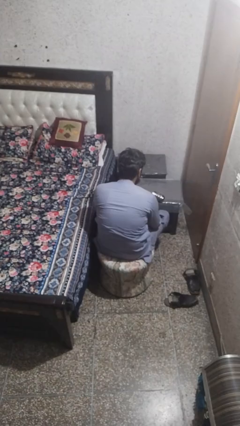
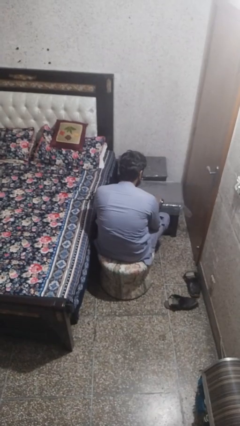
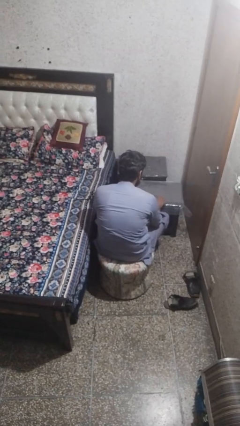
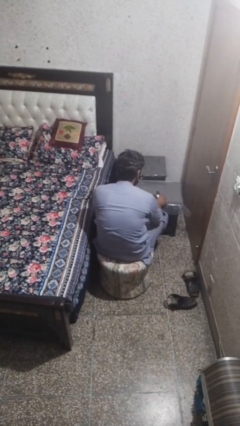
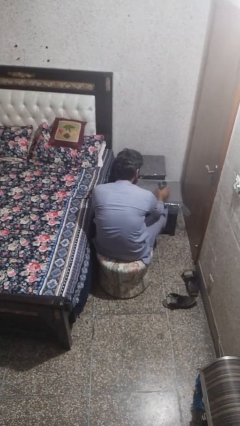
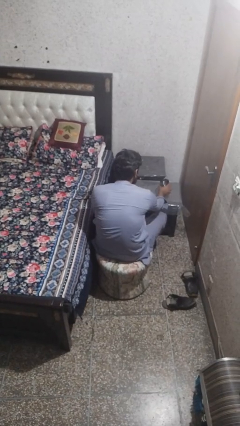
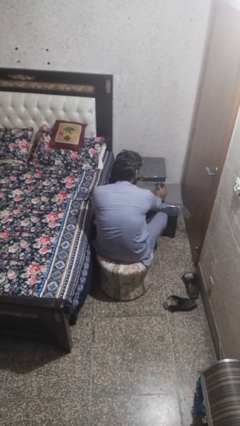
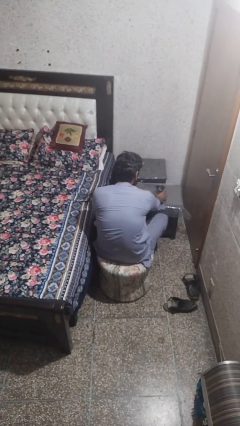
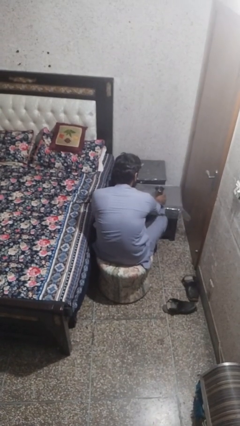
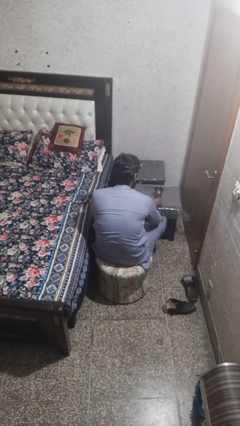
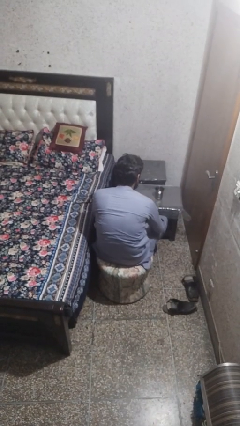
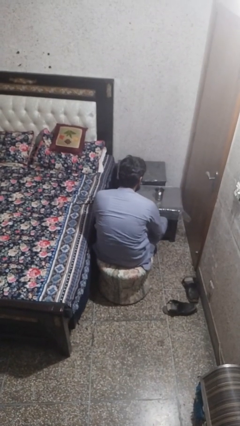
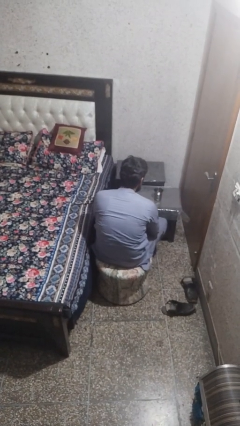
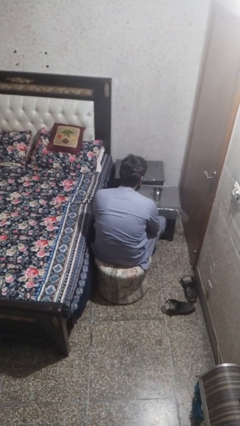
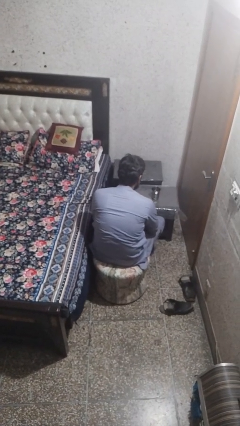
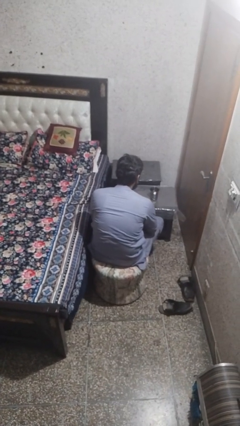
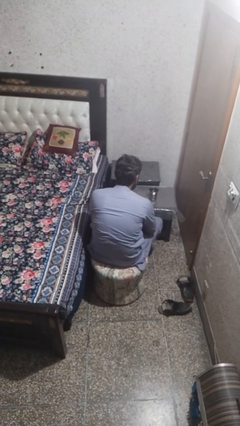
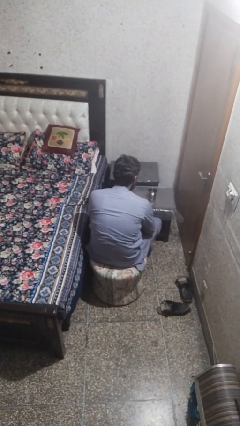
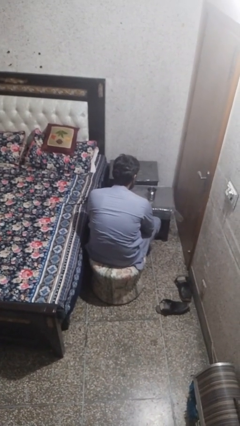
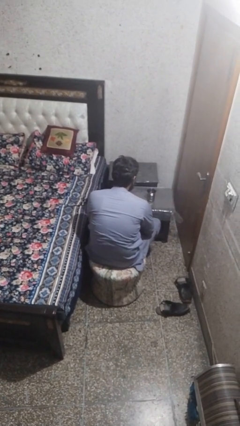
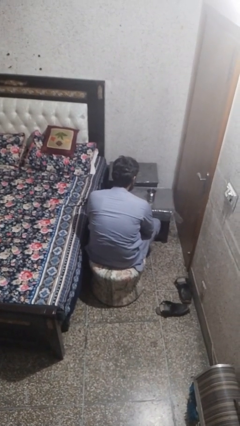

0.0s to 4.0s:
person sets upright glass

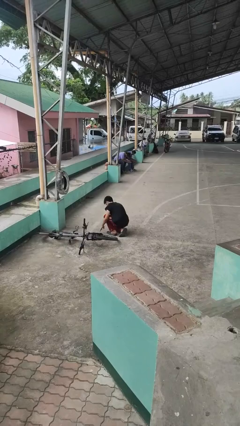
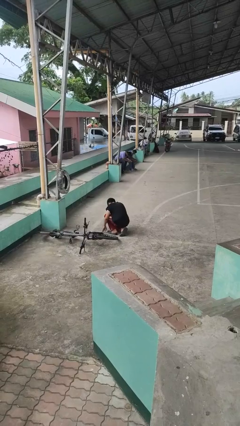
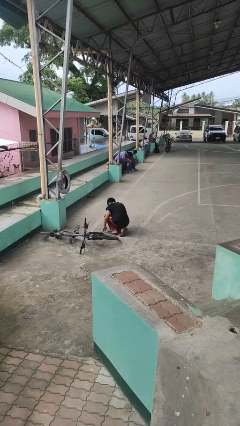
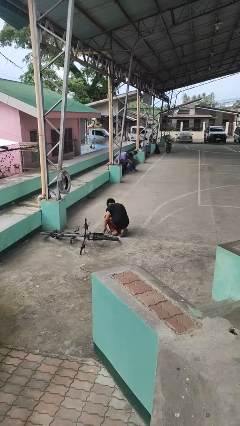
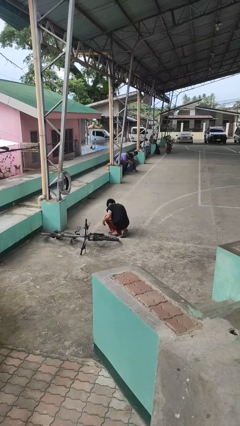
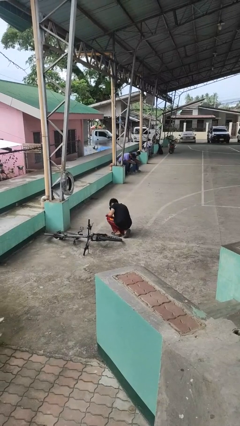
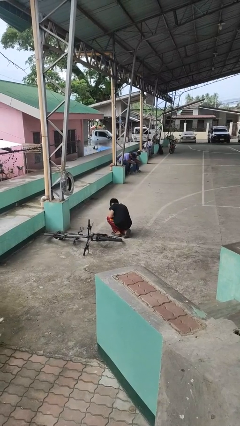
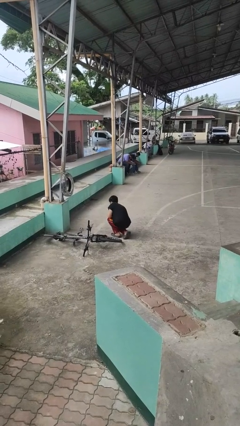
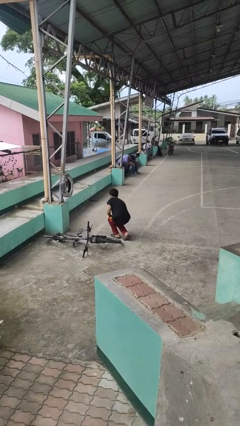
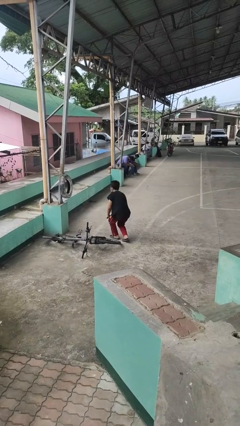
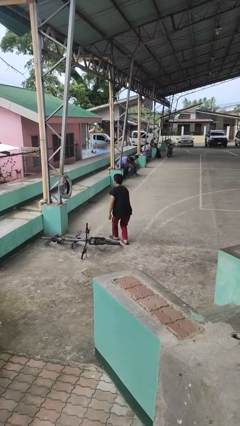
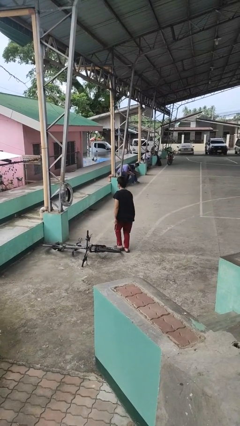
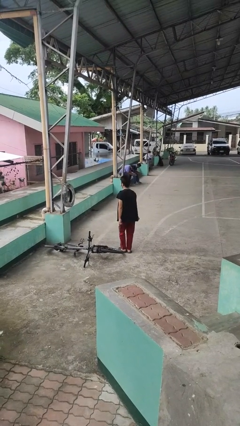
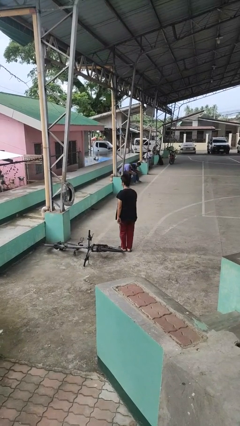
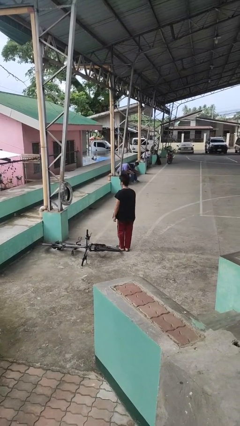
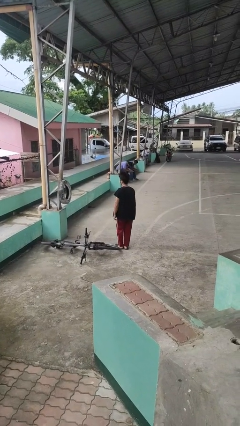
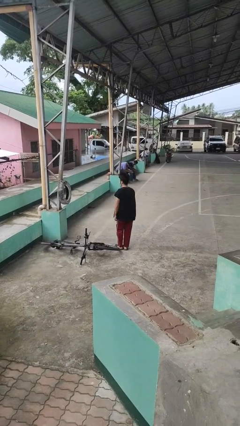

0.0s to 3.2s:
person stands up from floor

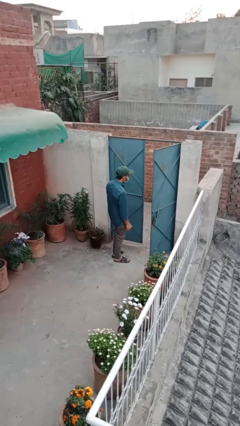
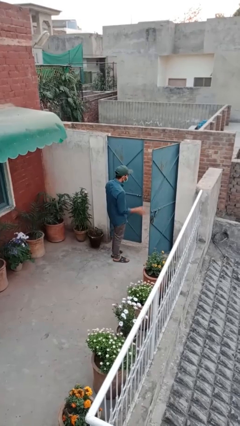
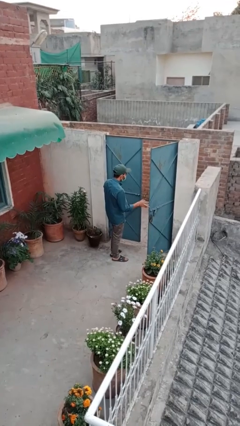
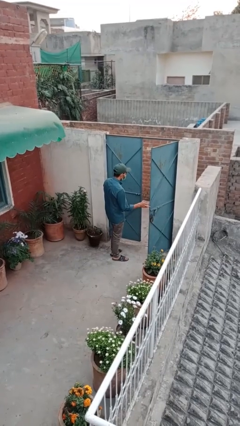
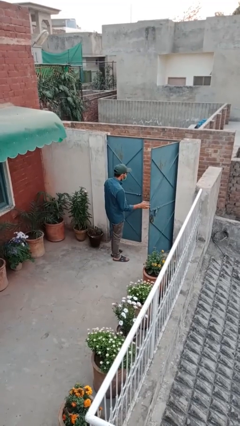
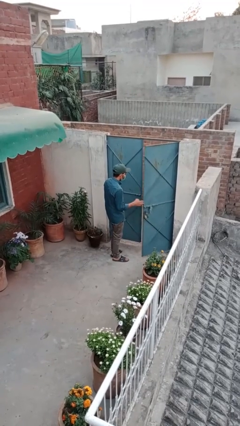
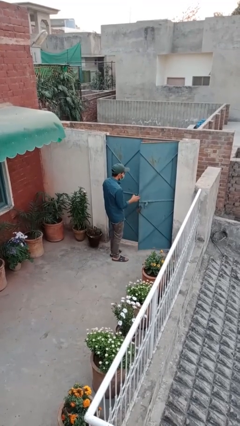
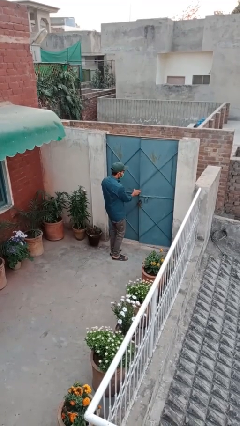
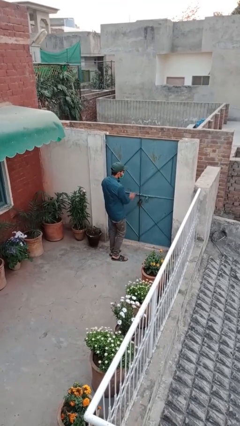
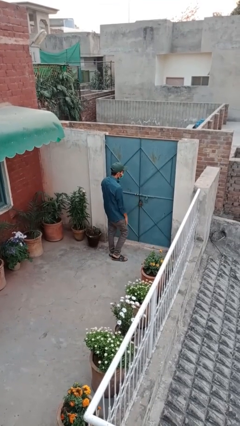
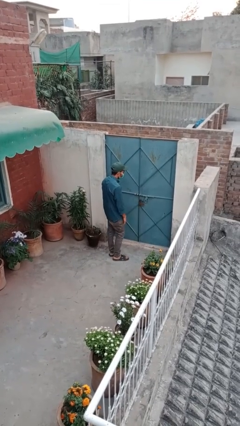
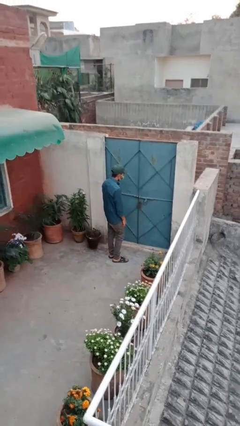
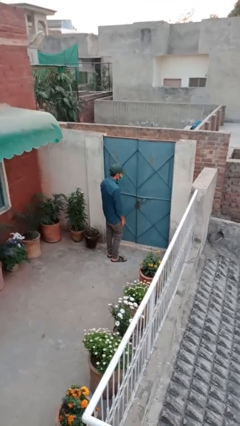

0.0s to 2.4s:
person closes facility door

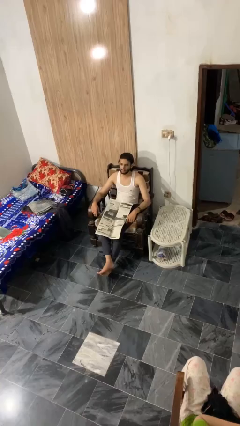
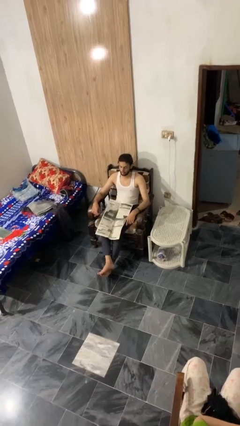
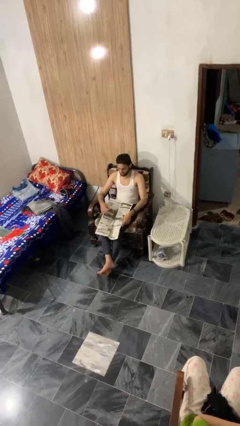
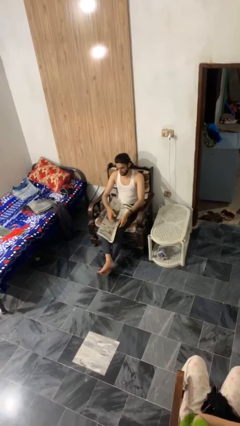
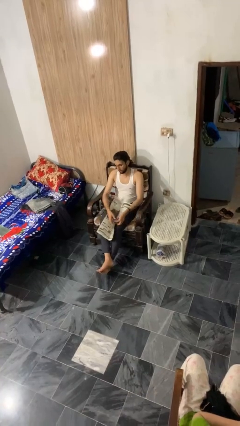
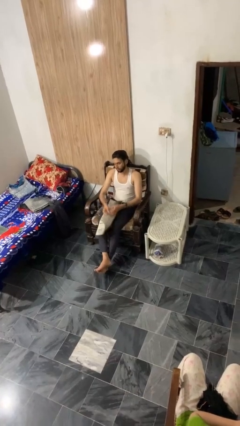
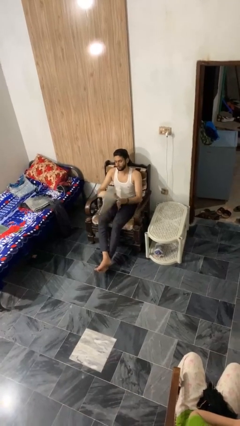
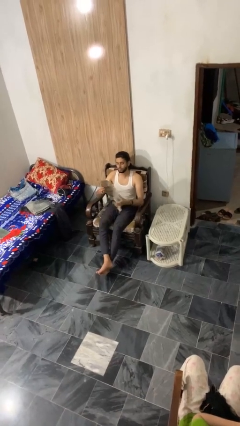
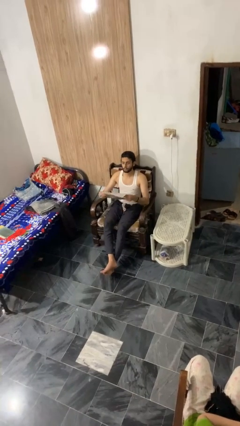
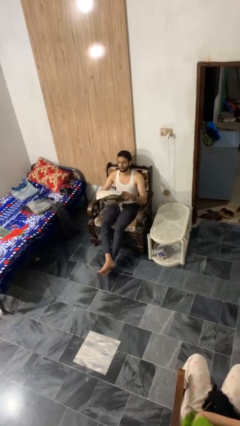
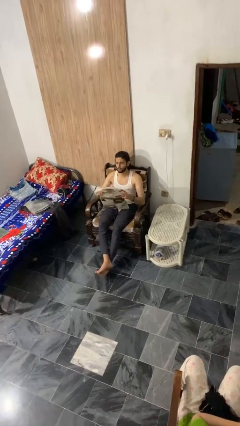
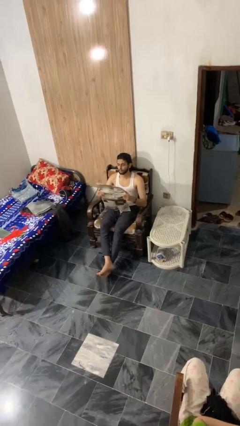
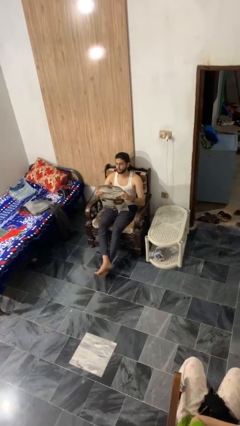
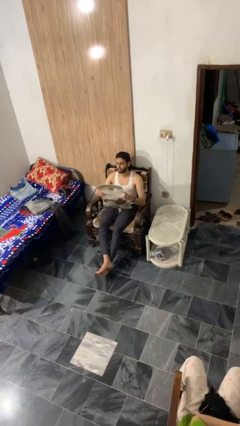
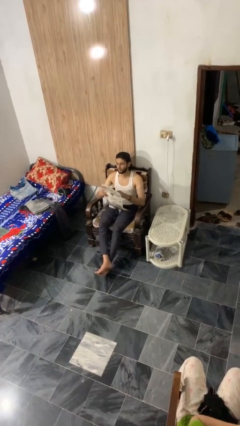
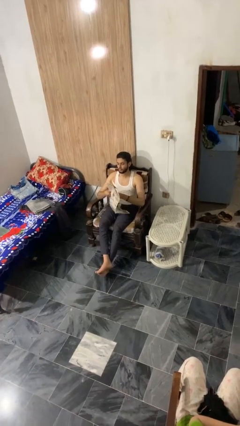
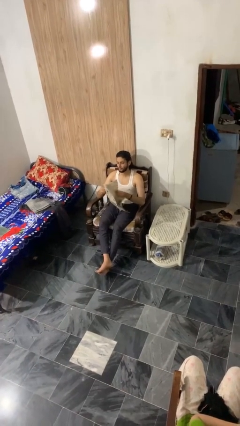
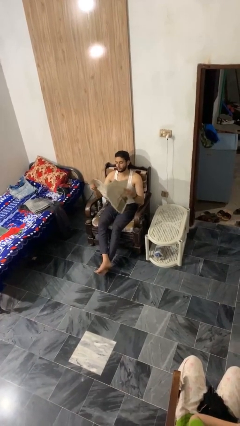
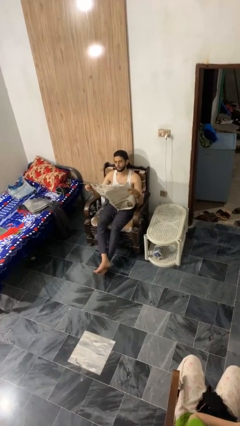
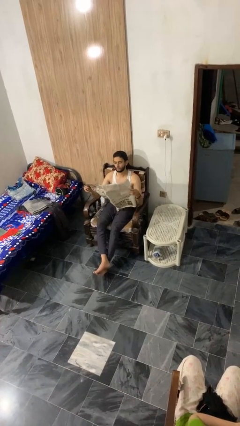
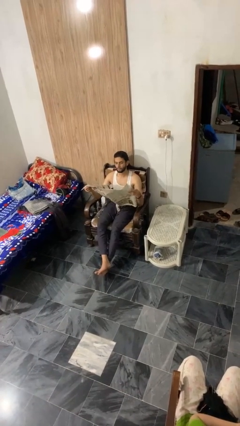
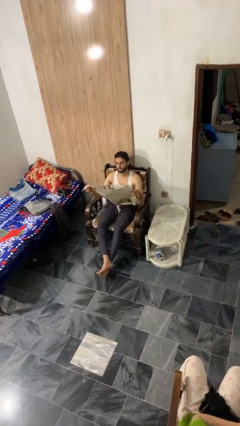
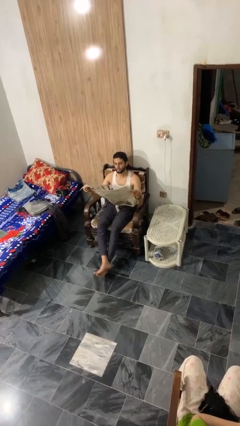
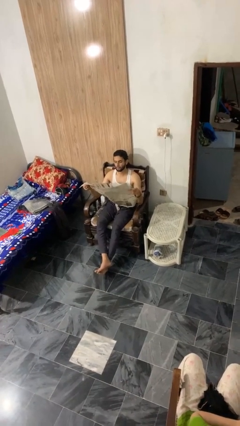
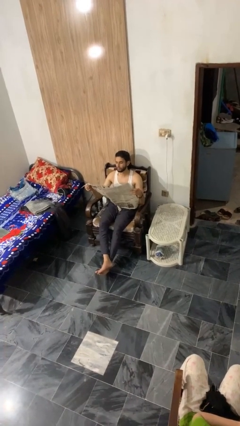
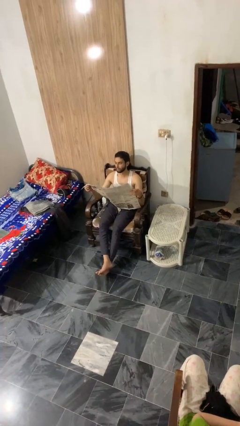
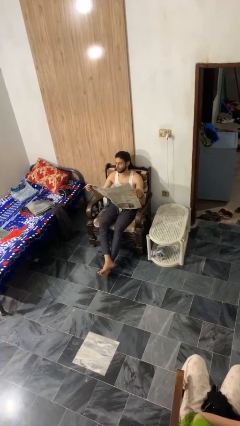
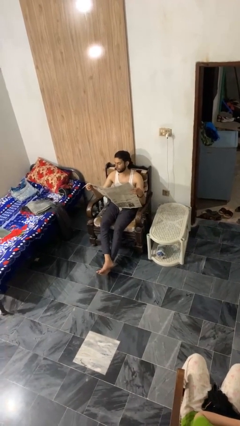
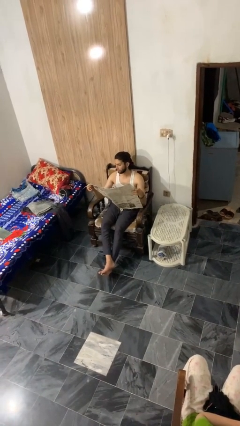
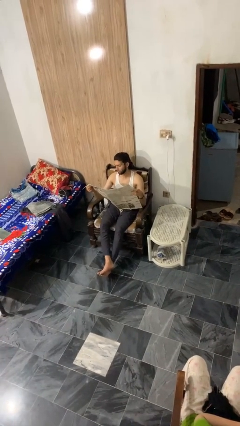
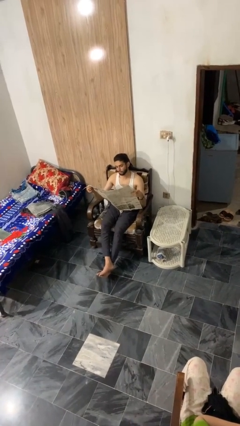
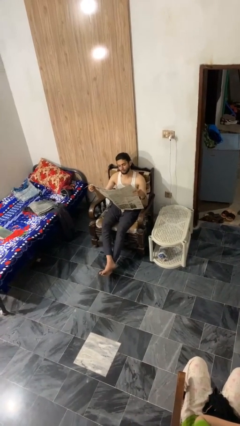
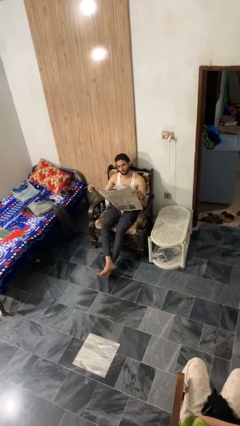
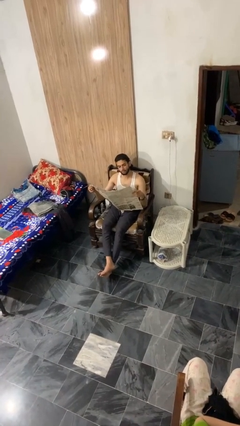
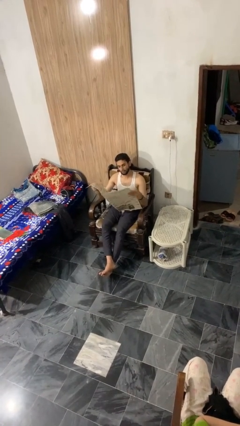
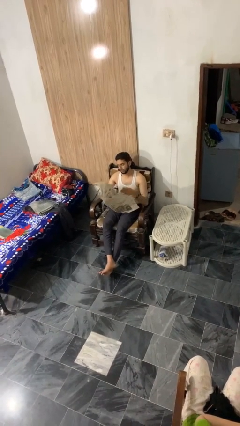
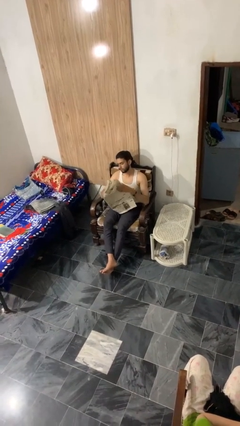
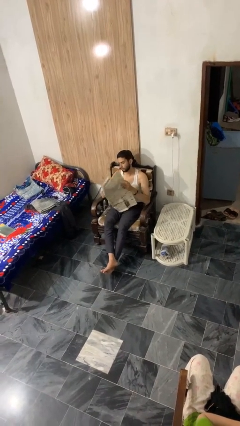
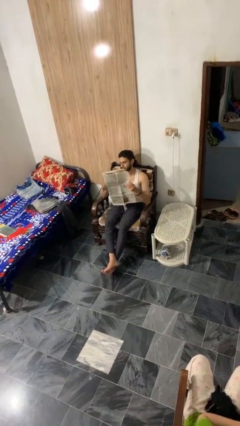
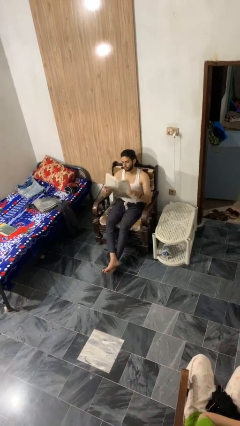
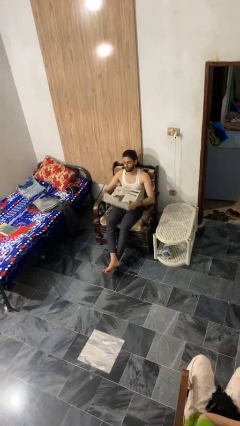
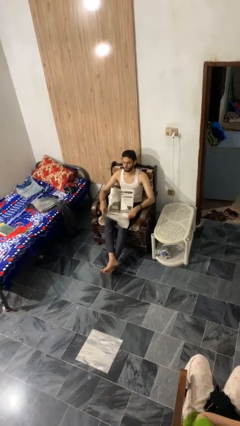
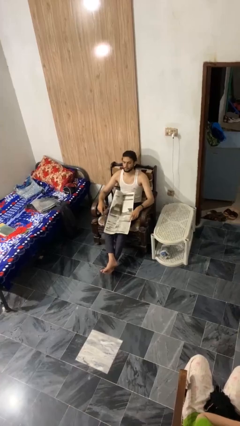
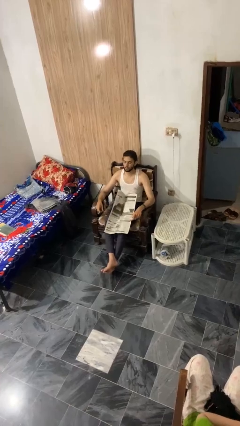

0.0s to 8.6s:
person reads newspaper
